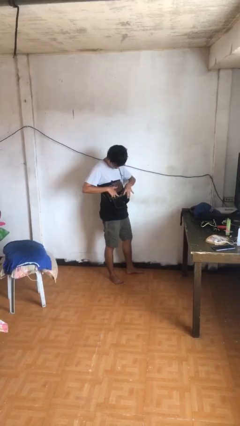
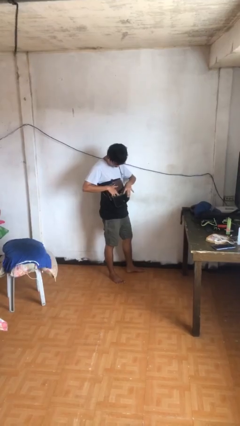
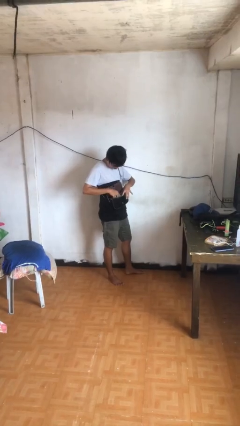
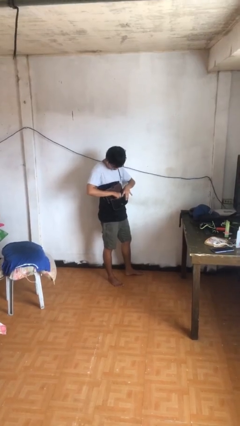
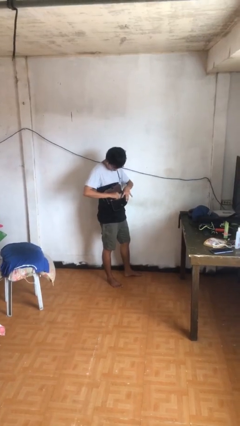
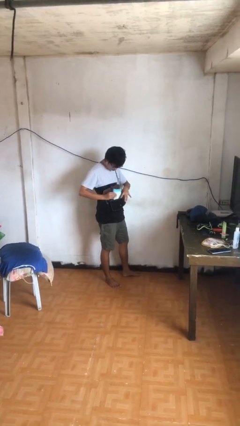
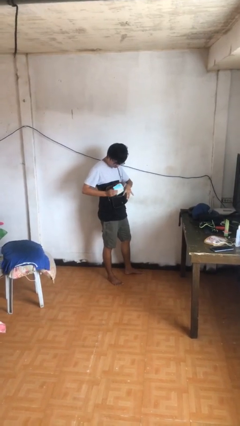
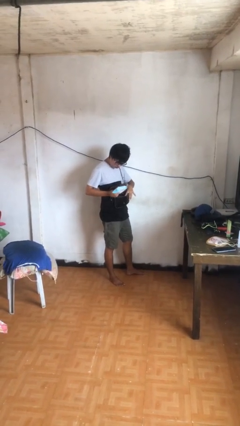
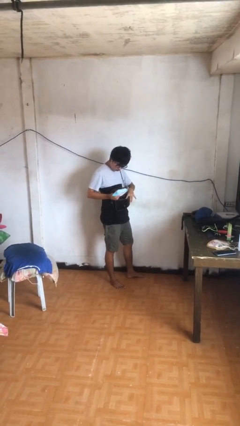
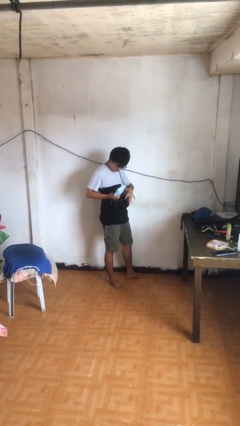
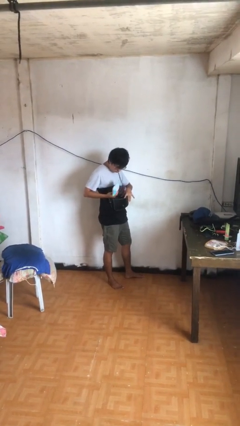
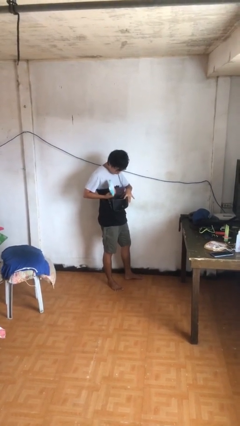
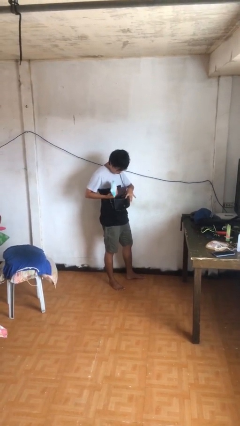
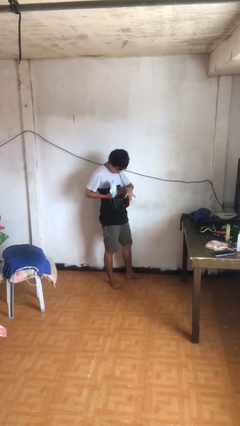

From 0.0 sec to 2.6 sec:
person takes object from purse

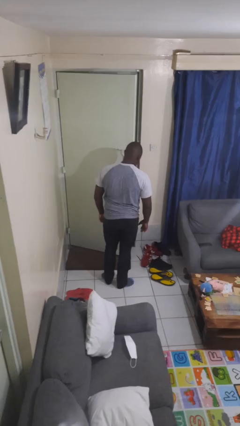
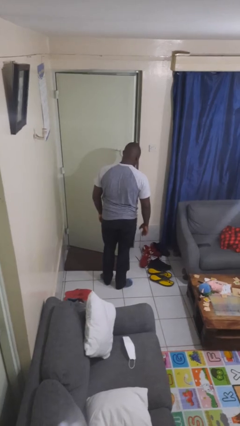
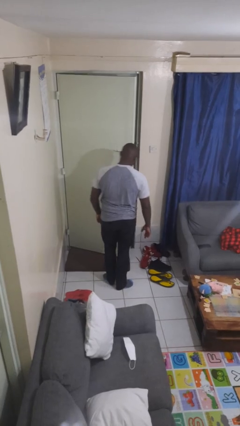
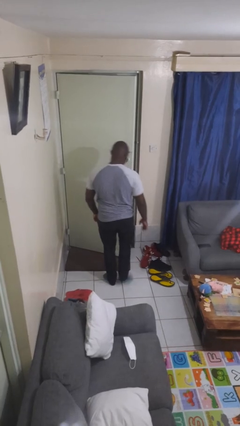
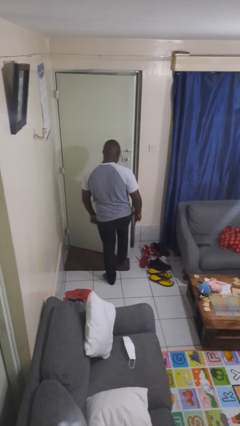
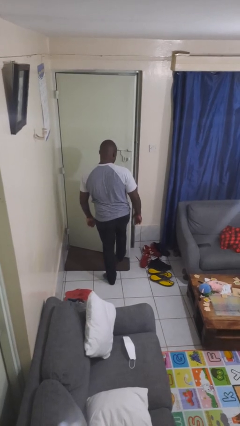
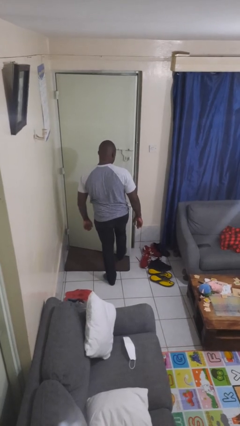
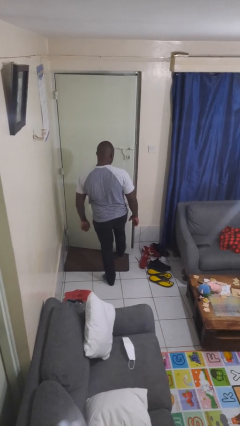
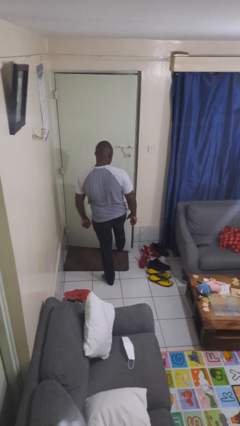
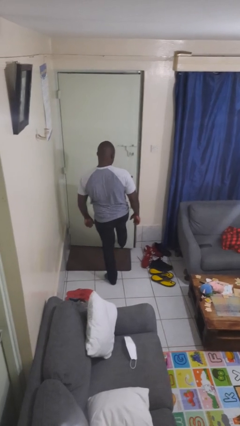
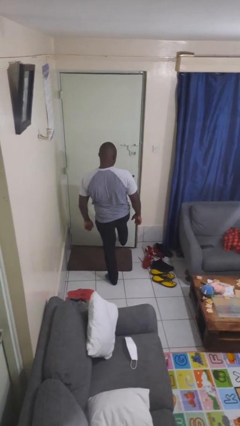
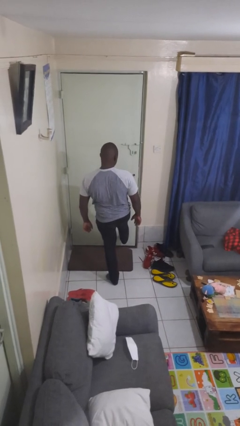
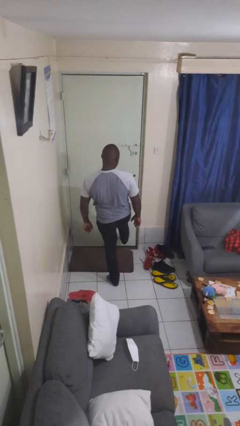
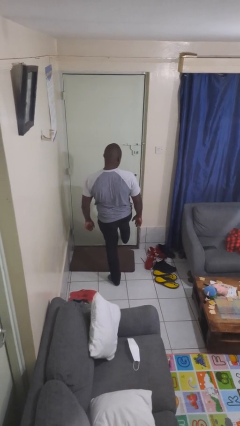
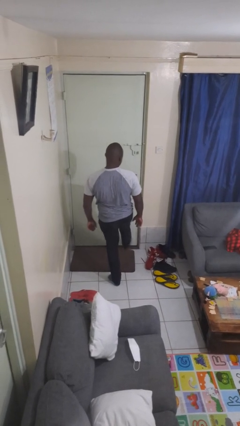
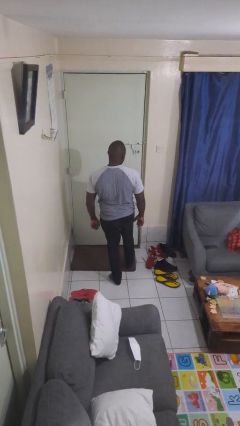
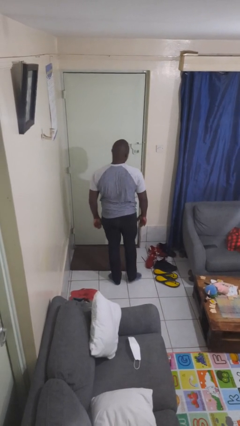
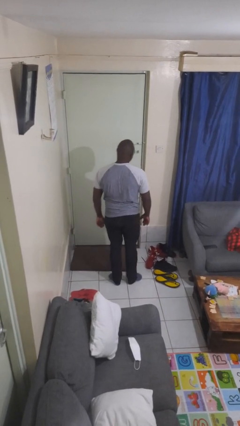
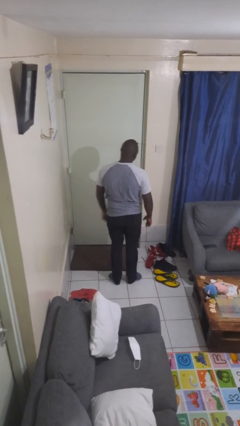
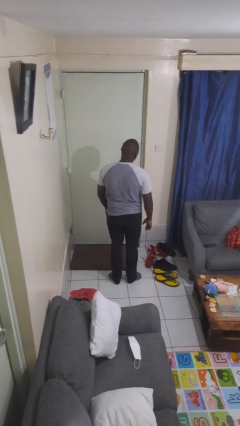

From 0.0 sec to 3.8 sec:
person closes door with foot

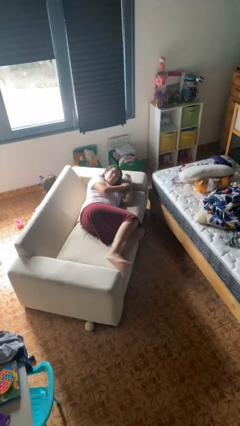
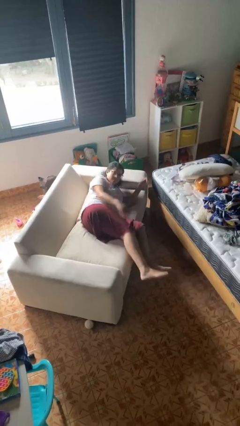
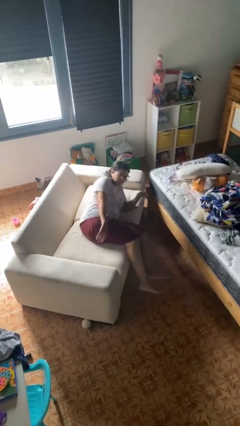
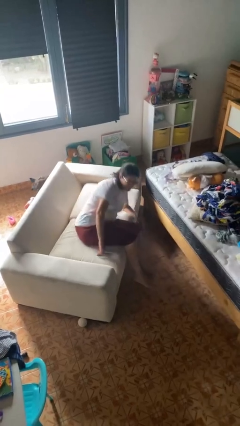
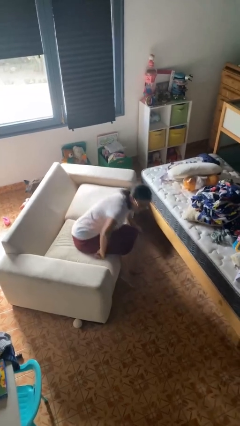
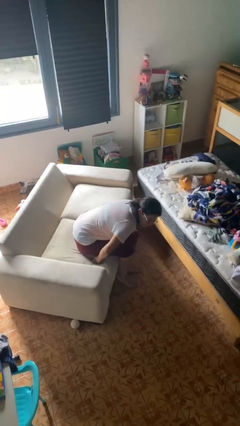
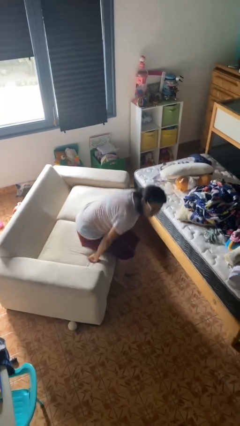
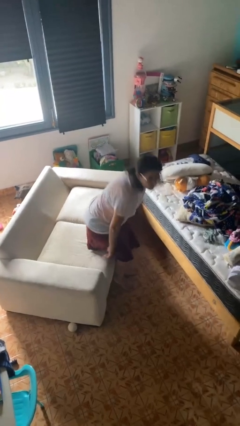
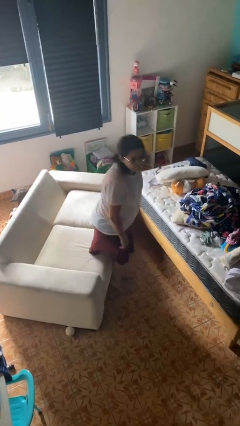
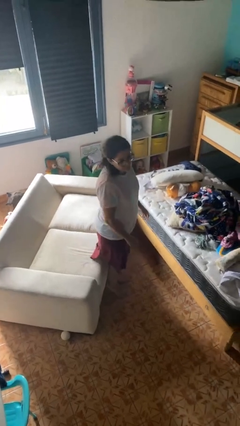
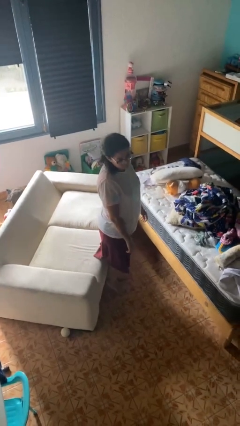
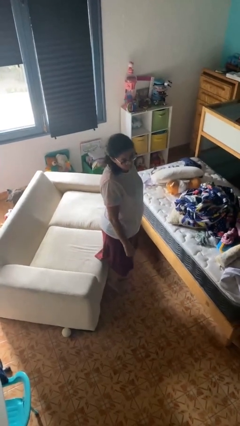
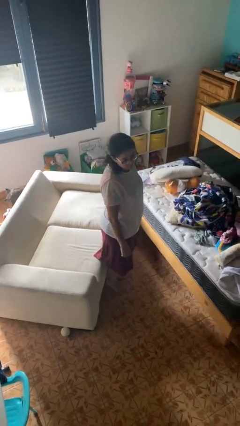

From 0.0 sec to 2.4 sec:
person stands up

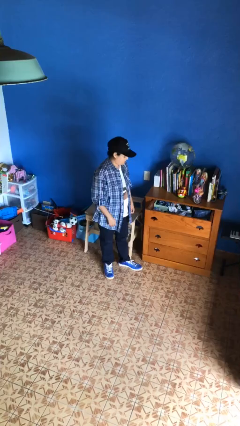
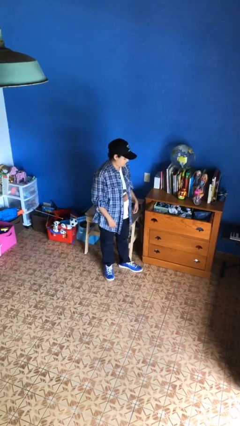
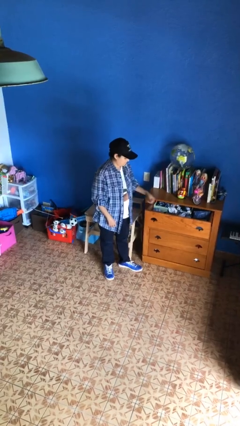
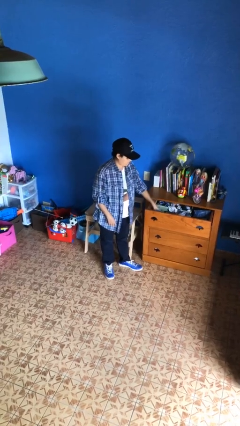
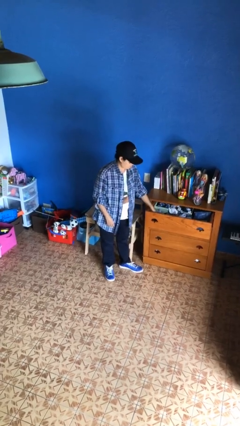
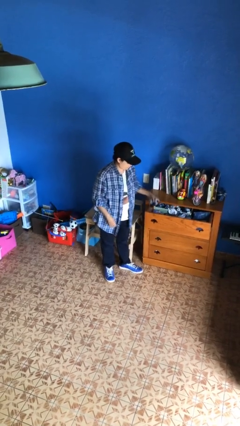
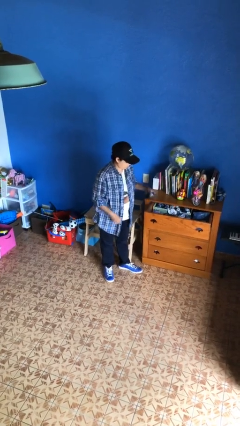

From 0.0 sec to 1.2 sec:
person takes clothes from dresser

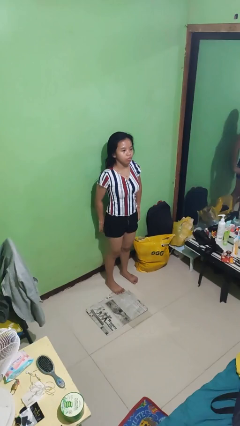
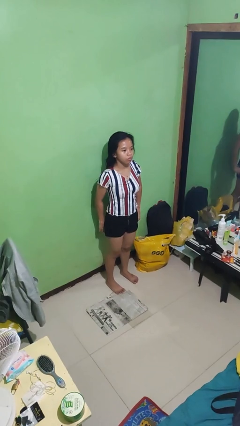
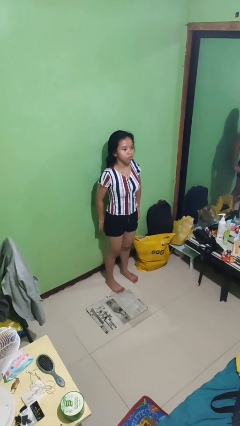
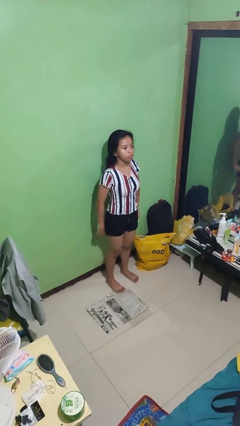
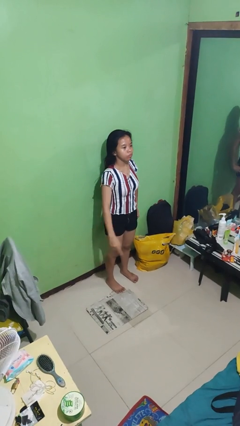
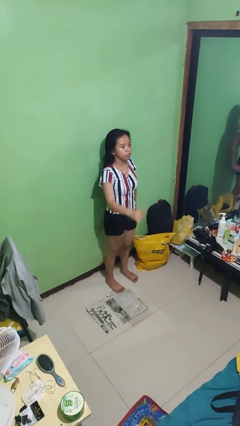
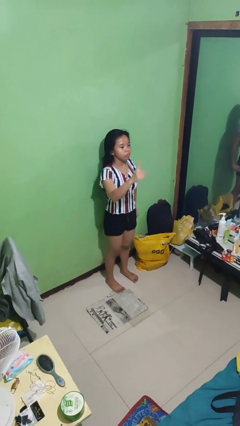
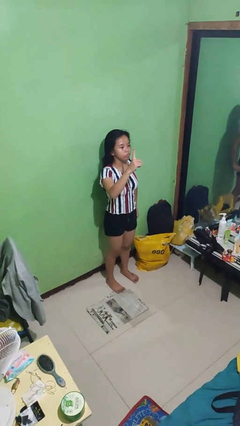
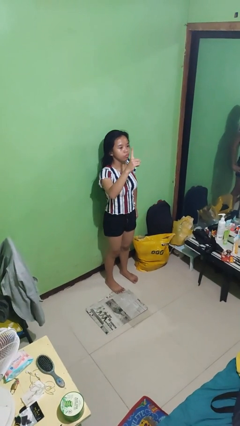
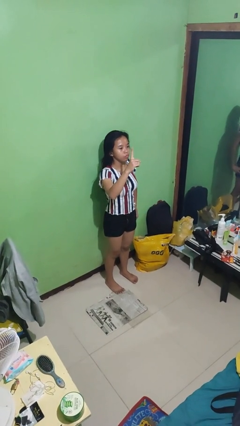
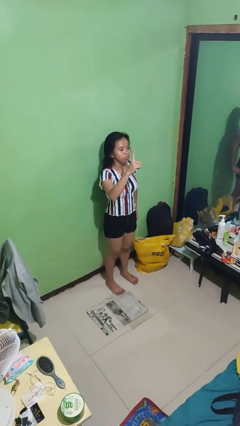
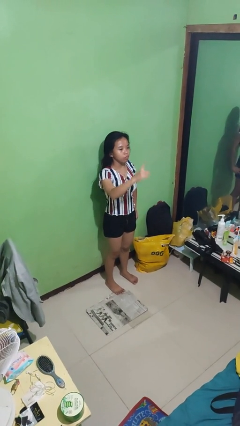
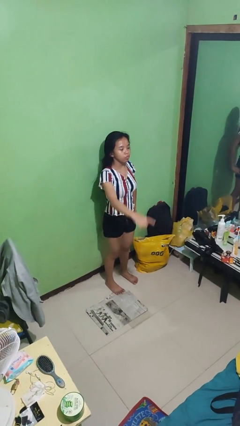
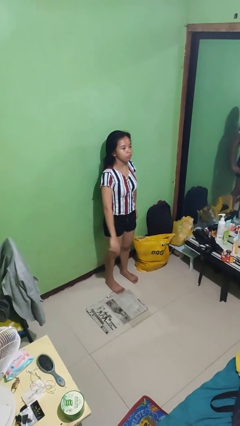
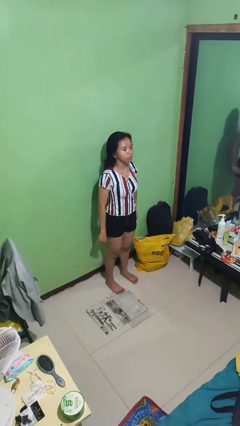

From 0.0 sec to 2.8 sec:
person gestures number one

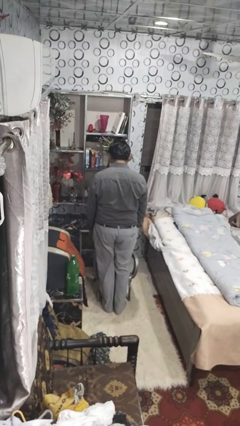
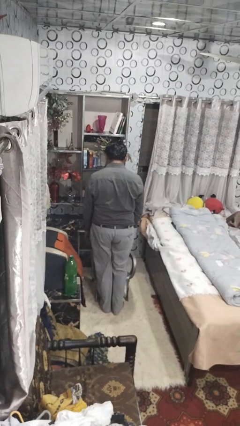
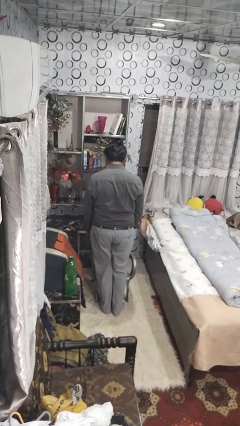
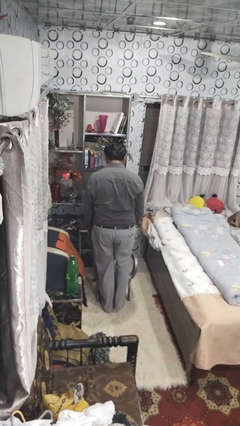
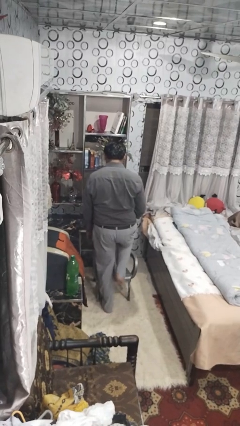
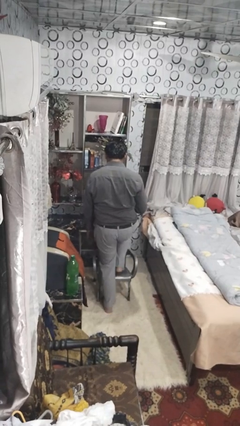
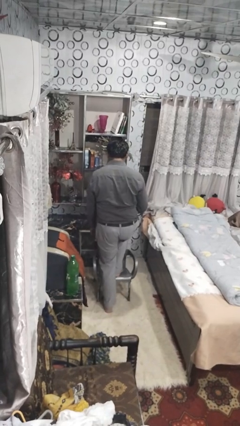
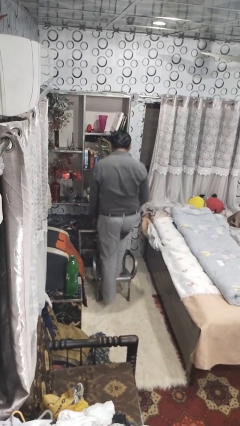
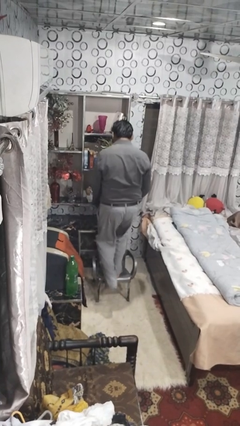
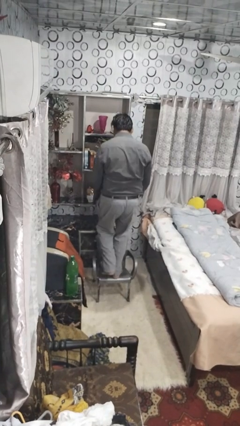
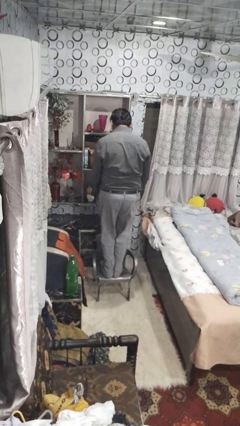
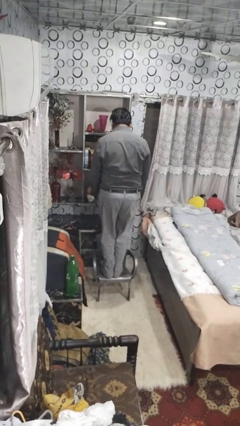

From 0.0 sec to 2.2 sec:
person climbs on chair

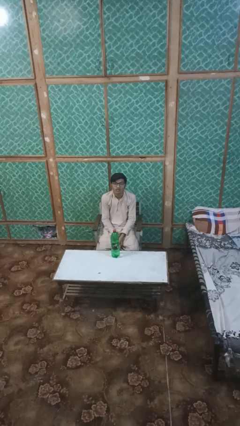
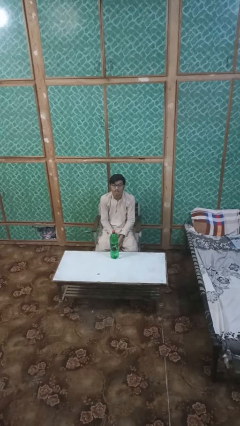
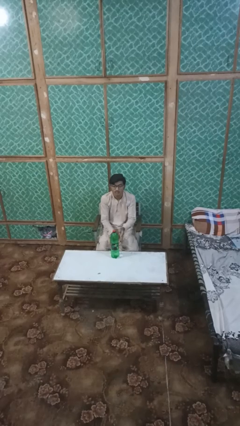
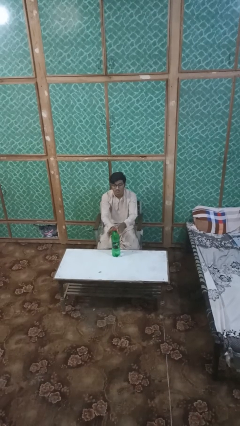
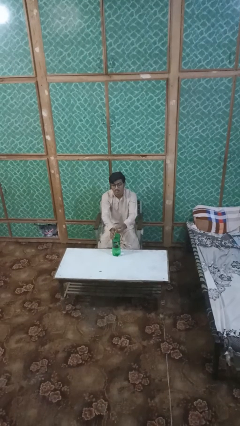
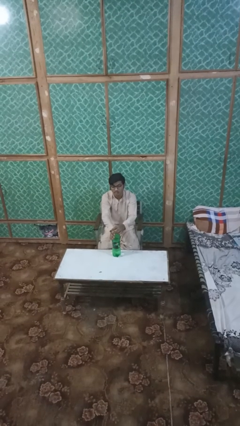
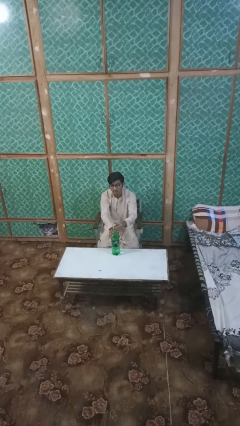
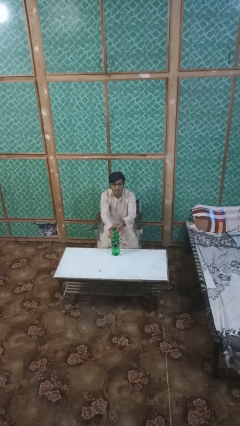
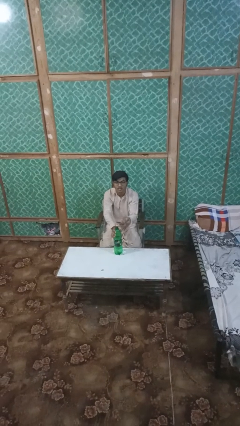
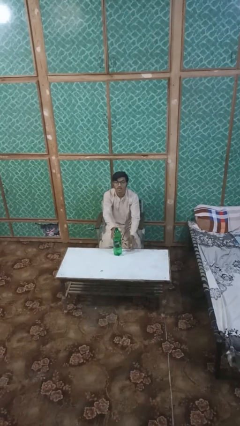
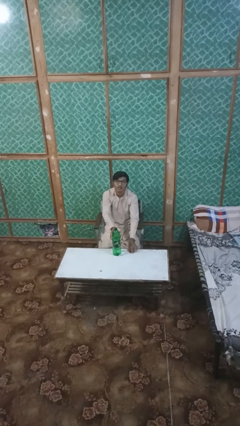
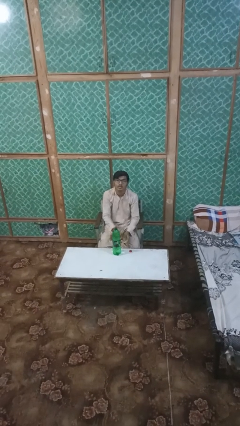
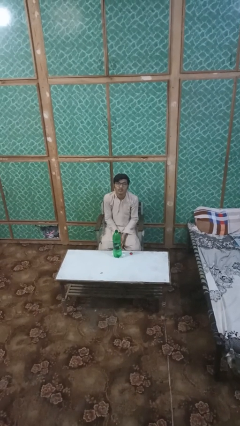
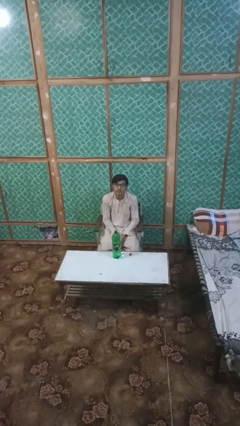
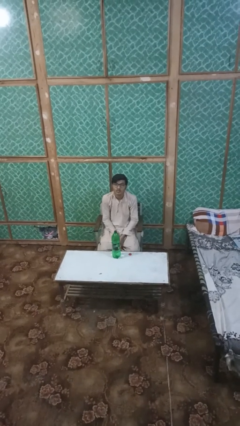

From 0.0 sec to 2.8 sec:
person unscrews lid from bottle
